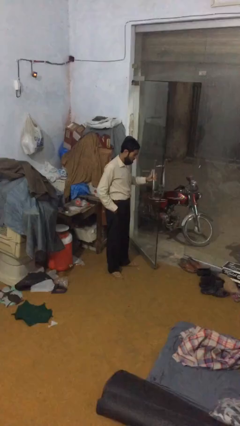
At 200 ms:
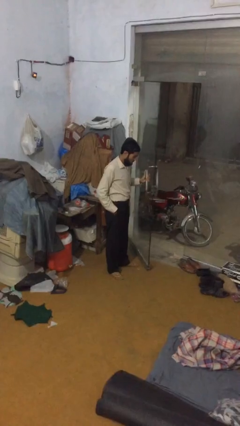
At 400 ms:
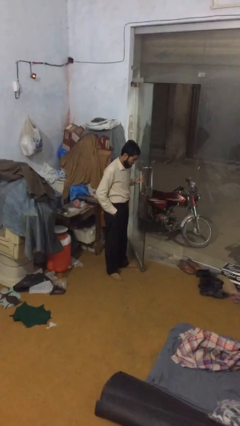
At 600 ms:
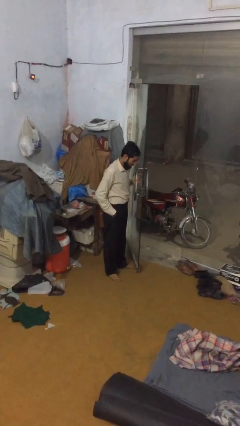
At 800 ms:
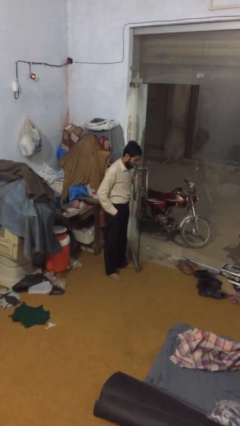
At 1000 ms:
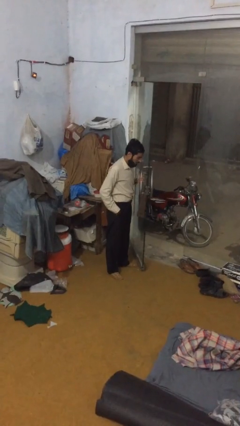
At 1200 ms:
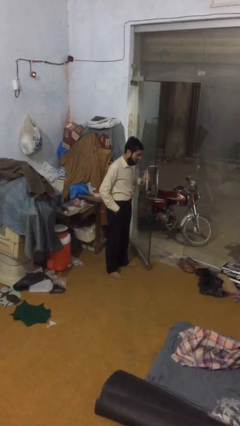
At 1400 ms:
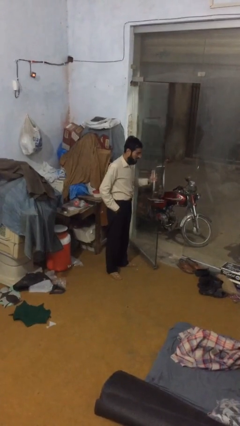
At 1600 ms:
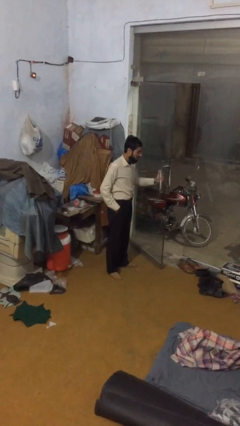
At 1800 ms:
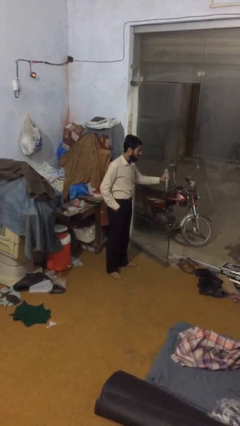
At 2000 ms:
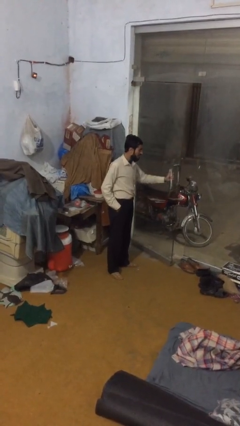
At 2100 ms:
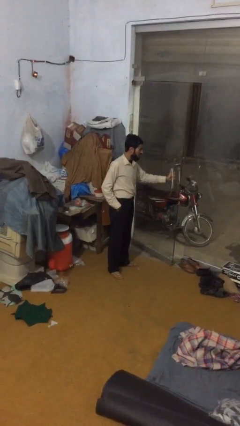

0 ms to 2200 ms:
person closes facility door

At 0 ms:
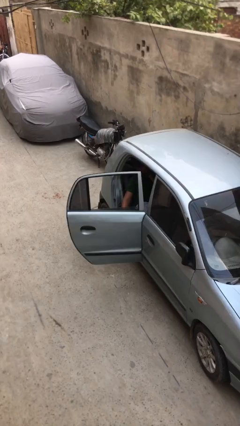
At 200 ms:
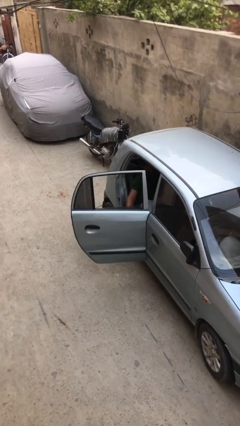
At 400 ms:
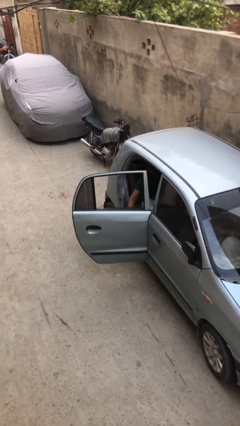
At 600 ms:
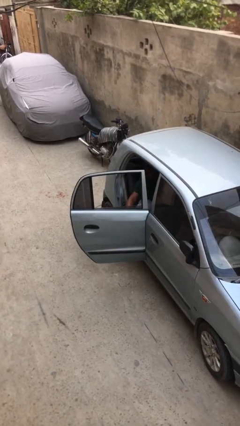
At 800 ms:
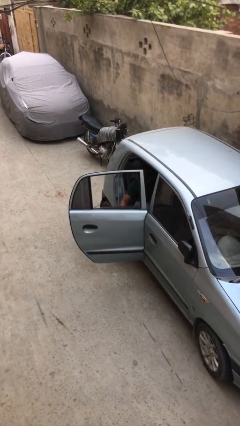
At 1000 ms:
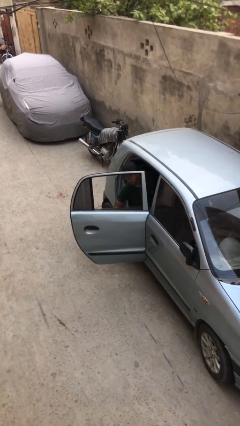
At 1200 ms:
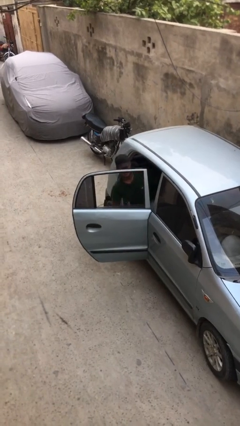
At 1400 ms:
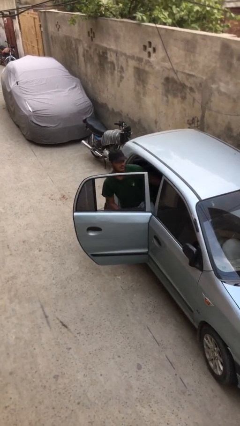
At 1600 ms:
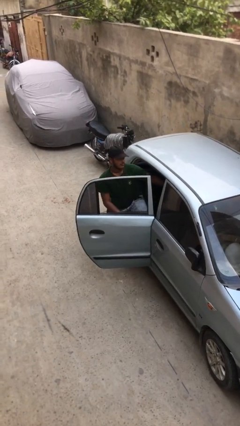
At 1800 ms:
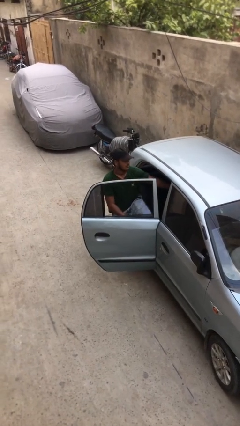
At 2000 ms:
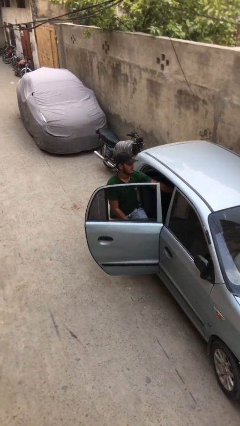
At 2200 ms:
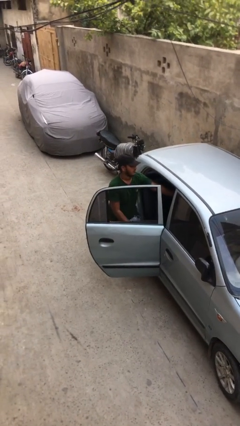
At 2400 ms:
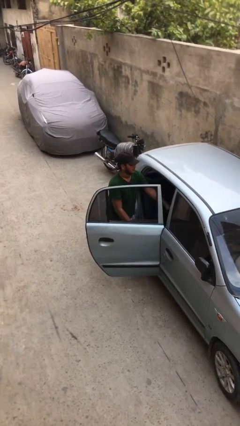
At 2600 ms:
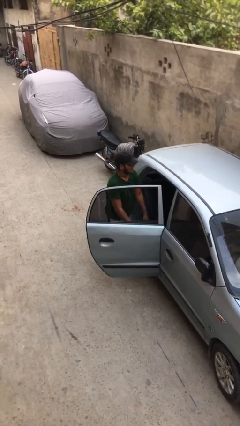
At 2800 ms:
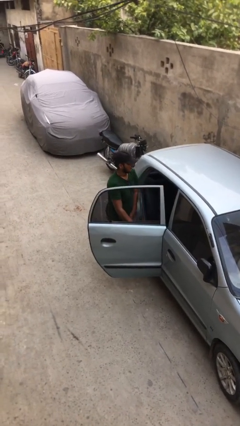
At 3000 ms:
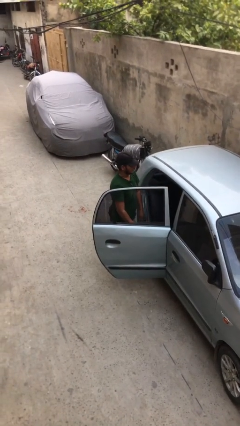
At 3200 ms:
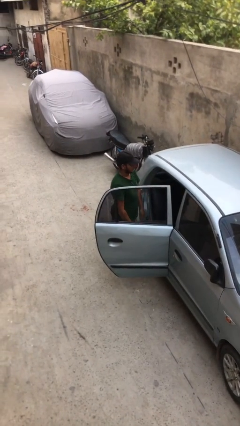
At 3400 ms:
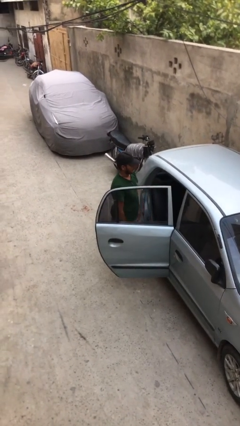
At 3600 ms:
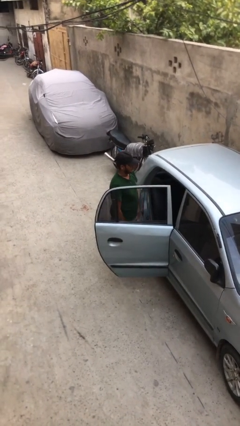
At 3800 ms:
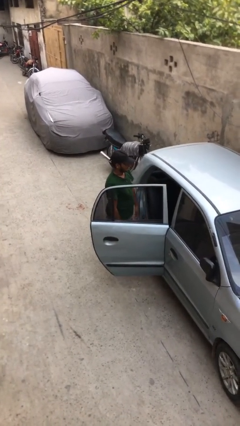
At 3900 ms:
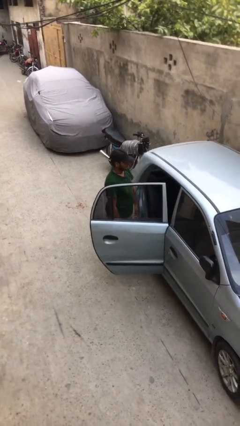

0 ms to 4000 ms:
person exits car

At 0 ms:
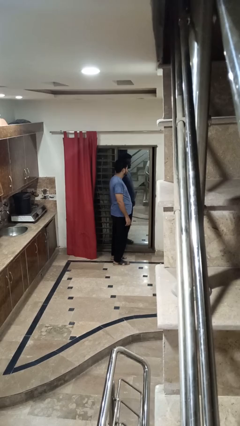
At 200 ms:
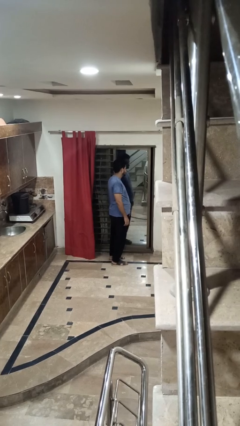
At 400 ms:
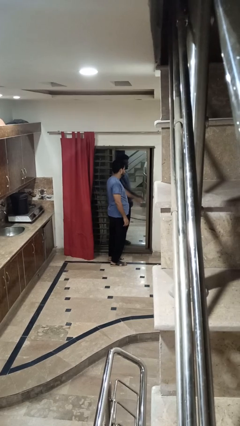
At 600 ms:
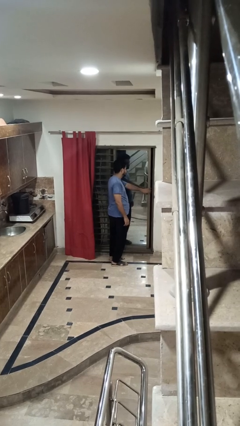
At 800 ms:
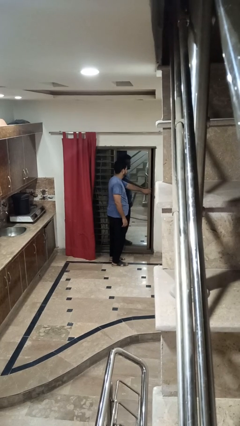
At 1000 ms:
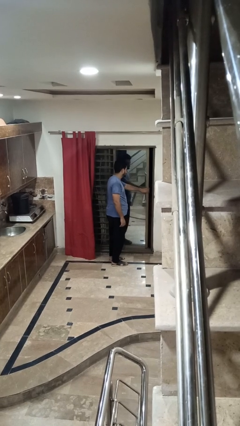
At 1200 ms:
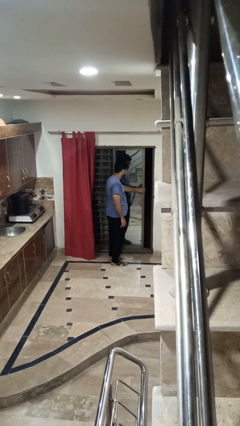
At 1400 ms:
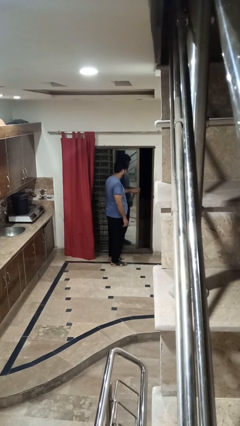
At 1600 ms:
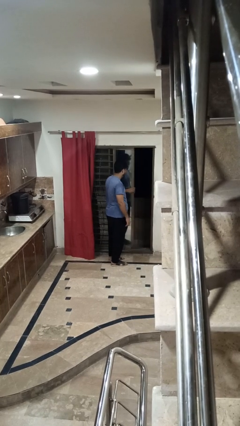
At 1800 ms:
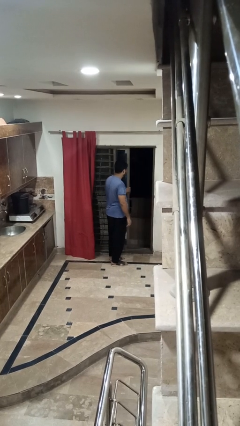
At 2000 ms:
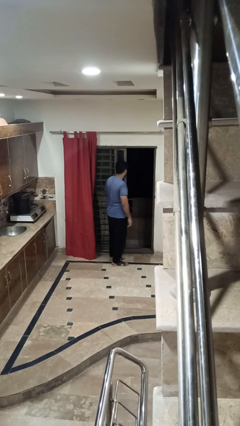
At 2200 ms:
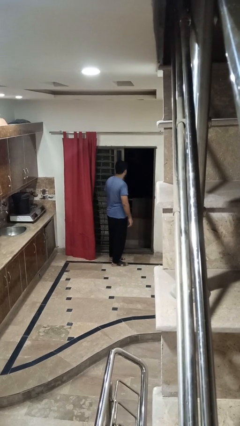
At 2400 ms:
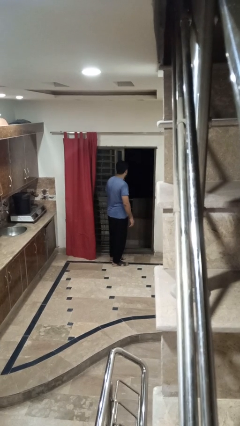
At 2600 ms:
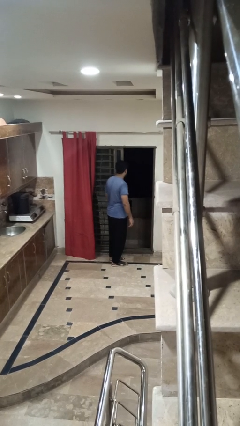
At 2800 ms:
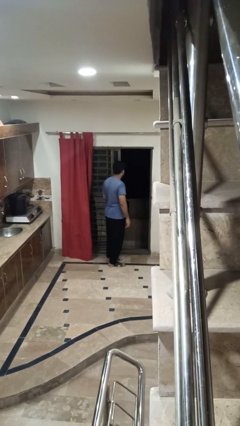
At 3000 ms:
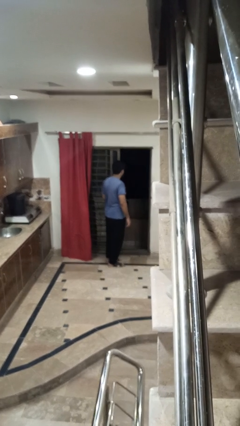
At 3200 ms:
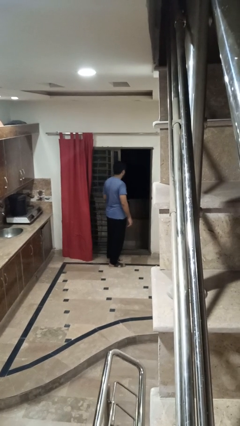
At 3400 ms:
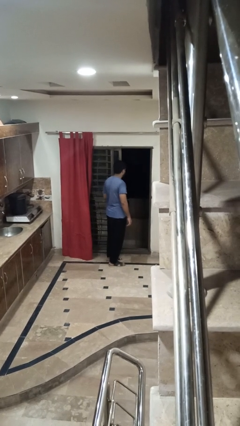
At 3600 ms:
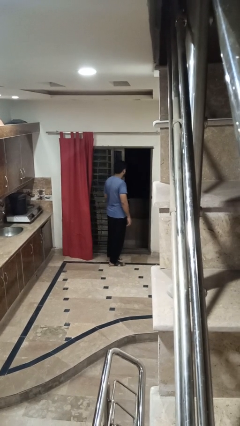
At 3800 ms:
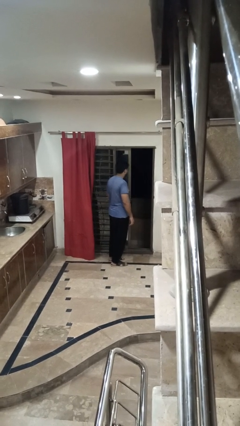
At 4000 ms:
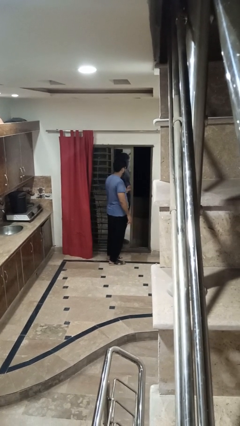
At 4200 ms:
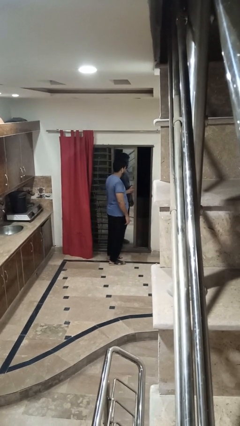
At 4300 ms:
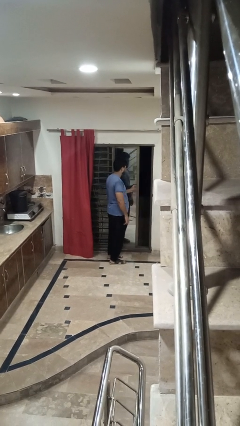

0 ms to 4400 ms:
person opens sliding door

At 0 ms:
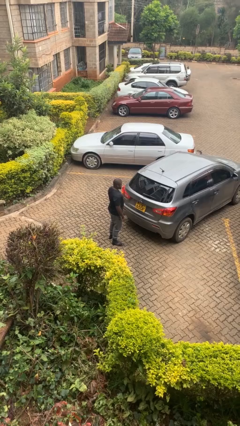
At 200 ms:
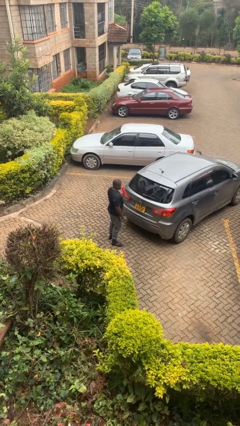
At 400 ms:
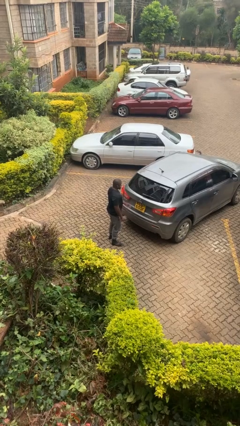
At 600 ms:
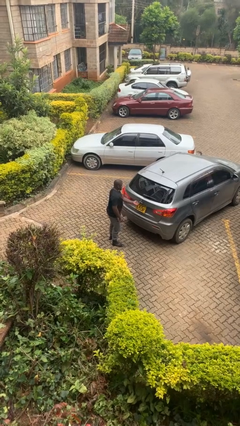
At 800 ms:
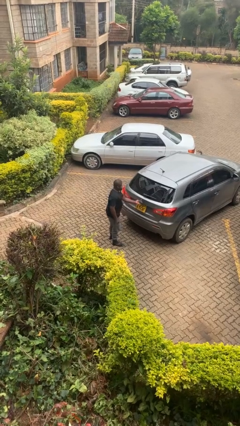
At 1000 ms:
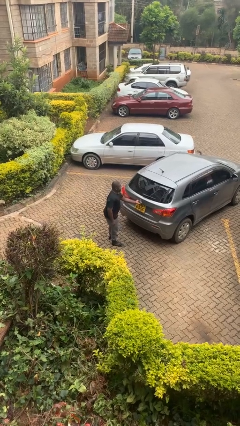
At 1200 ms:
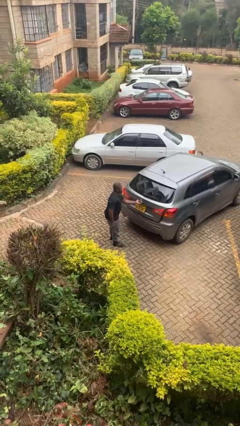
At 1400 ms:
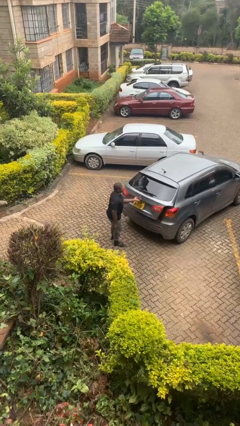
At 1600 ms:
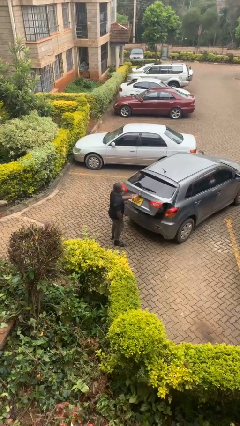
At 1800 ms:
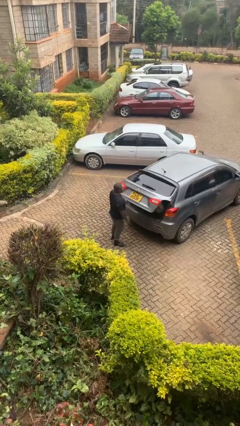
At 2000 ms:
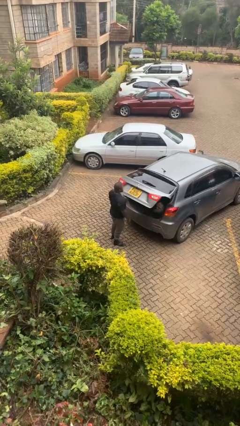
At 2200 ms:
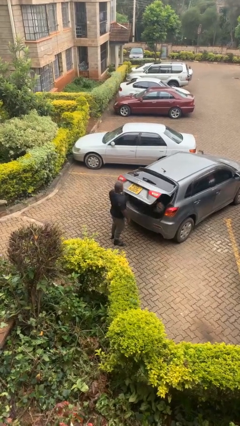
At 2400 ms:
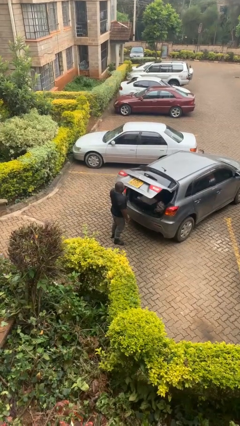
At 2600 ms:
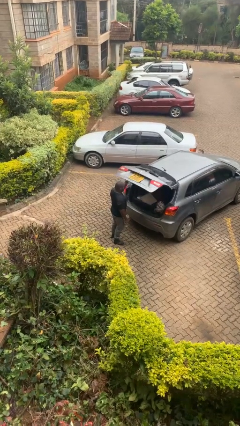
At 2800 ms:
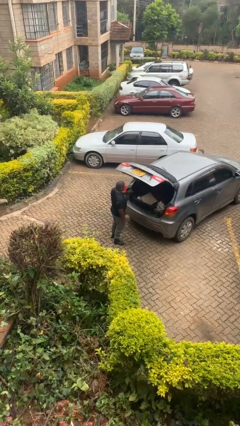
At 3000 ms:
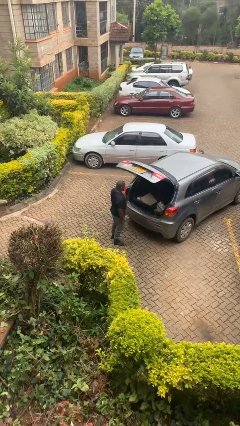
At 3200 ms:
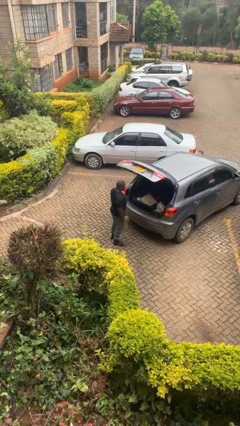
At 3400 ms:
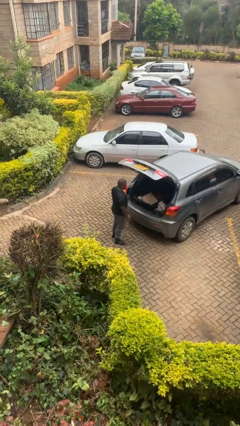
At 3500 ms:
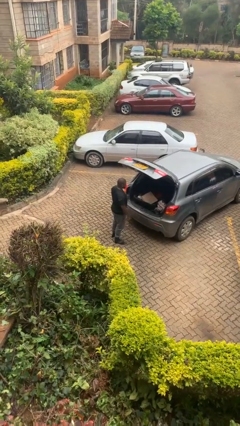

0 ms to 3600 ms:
person opens car trunk

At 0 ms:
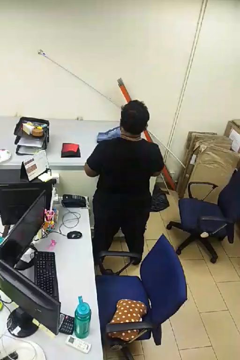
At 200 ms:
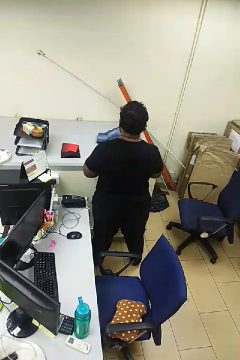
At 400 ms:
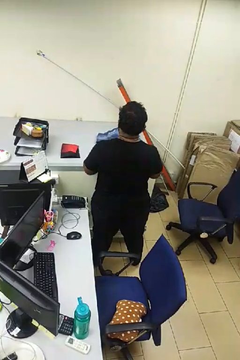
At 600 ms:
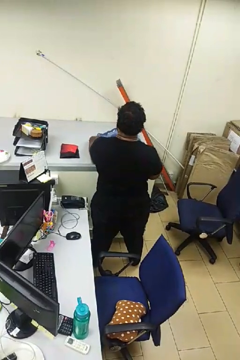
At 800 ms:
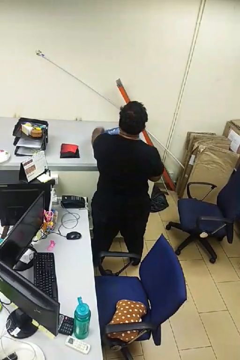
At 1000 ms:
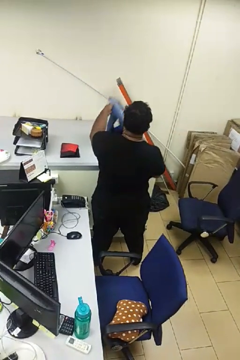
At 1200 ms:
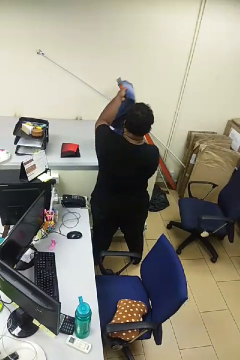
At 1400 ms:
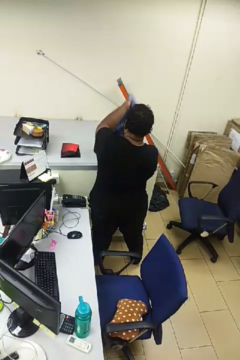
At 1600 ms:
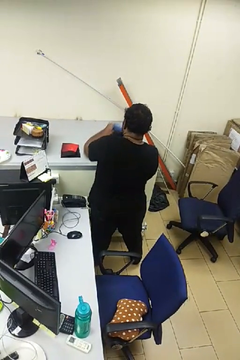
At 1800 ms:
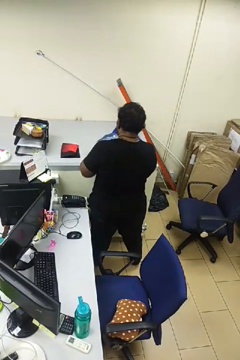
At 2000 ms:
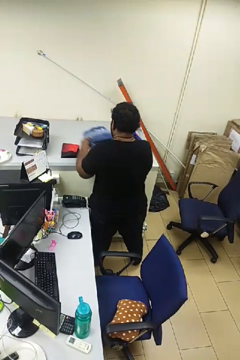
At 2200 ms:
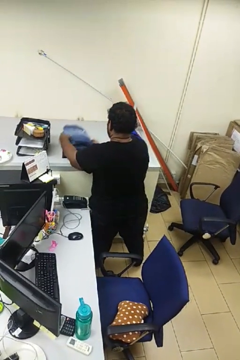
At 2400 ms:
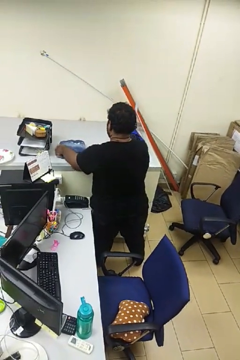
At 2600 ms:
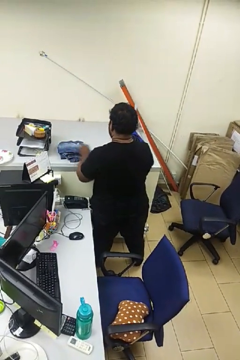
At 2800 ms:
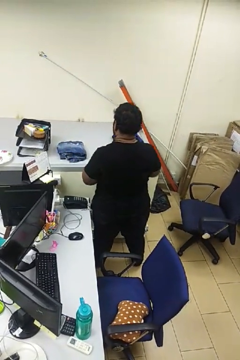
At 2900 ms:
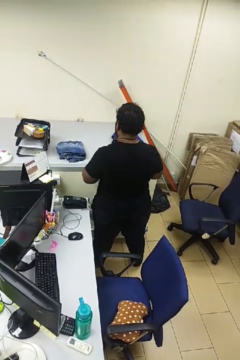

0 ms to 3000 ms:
person folds pants

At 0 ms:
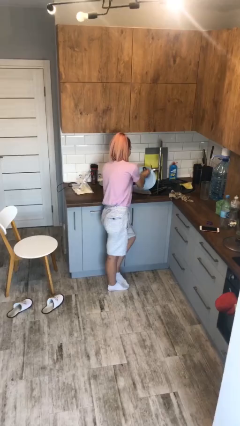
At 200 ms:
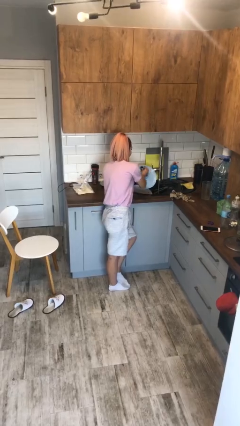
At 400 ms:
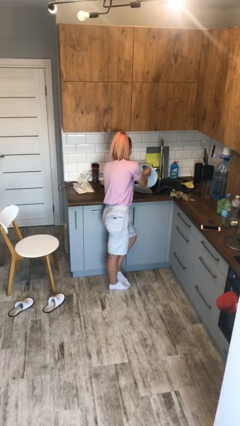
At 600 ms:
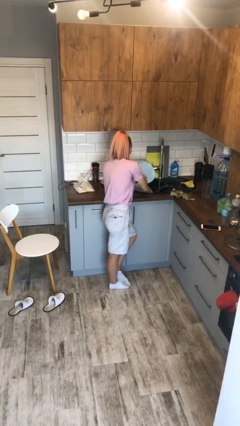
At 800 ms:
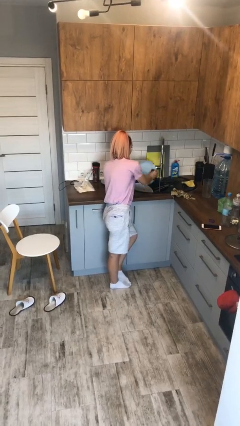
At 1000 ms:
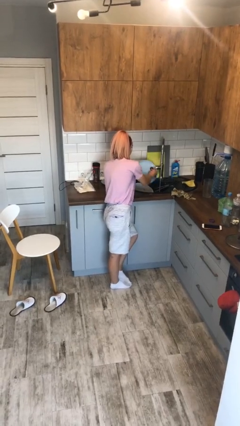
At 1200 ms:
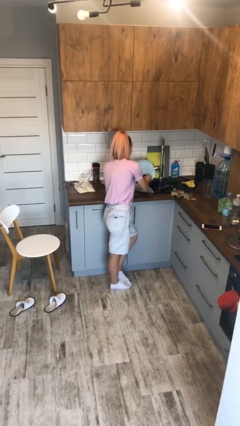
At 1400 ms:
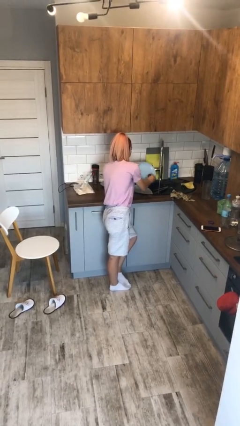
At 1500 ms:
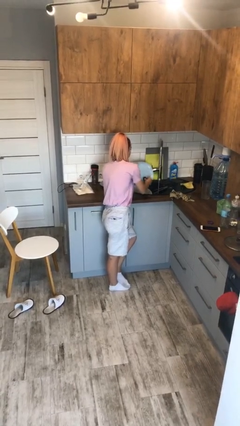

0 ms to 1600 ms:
person washes dish
